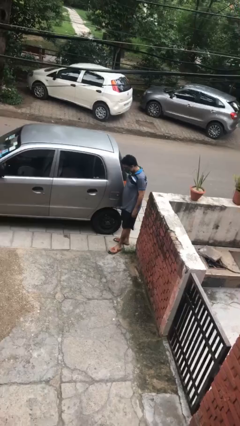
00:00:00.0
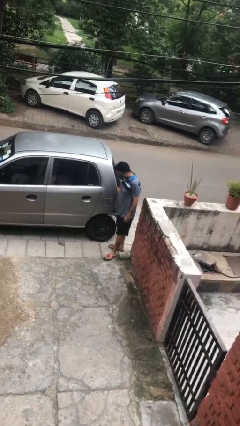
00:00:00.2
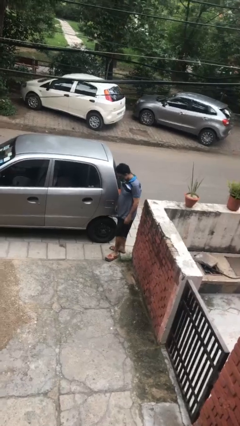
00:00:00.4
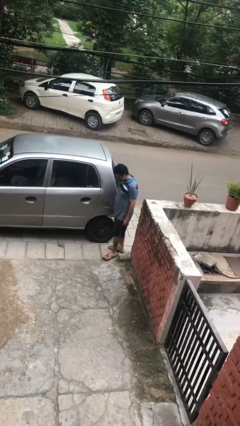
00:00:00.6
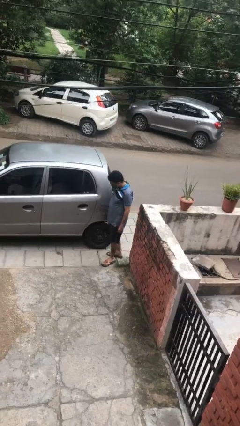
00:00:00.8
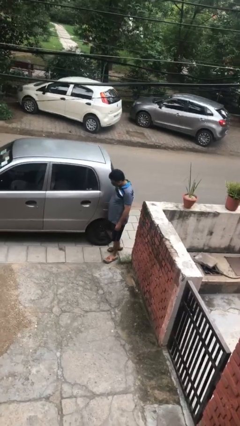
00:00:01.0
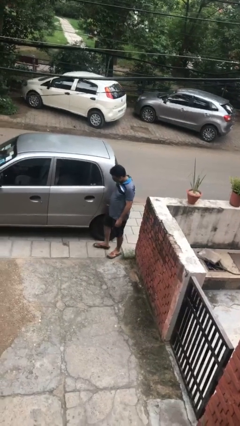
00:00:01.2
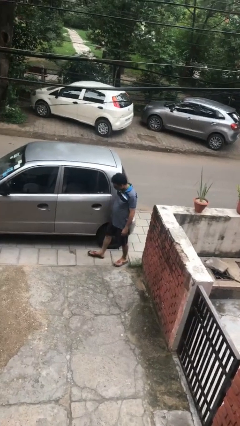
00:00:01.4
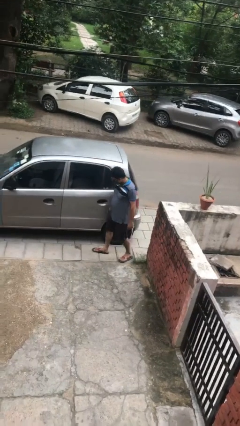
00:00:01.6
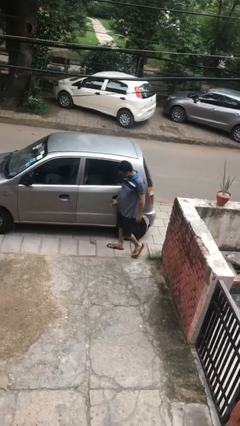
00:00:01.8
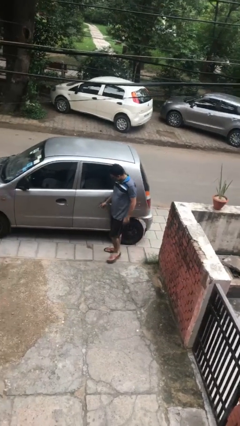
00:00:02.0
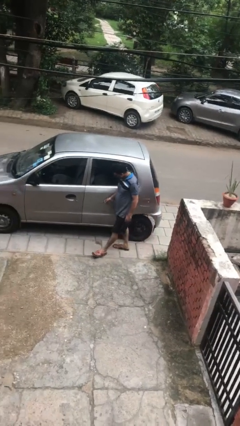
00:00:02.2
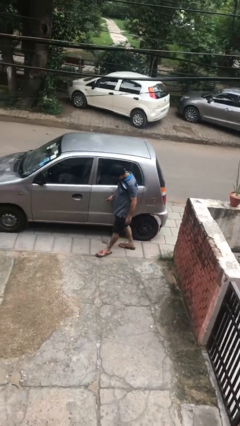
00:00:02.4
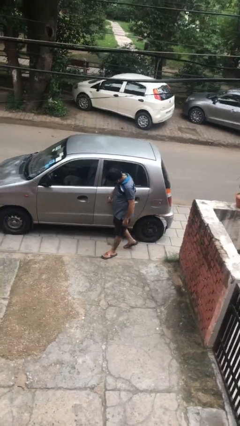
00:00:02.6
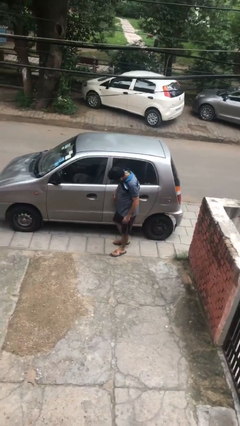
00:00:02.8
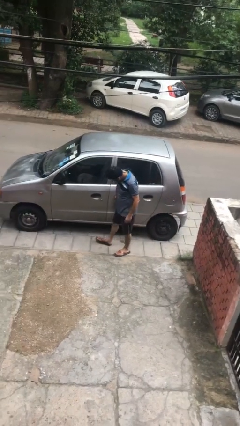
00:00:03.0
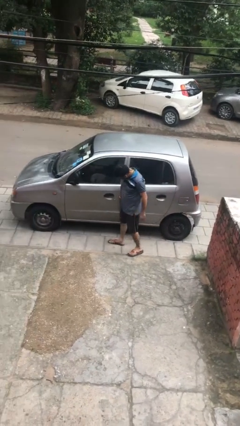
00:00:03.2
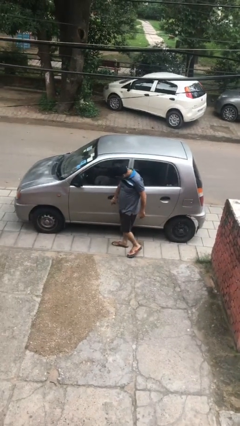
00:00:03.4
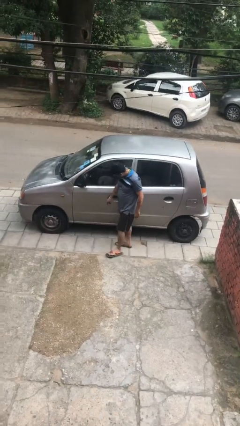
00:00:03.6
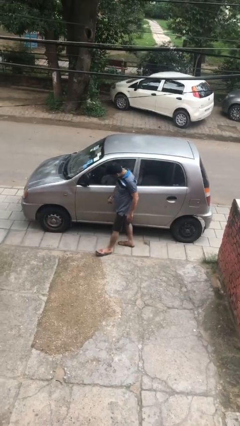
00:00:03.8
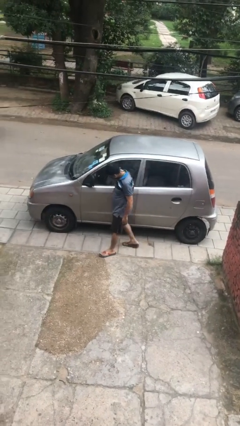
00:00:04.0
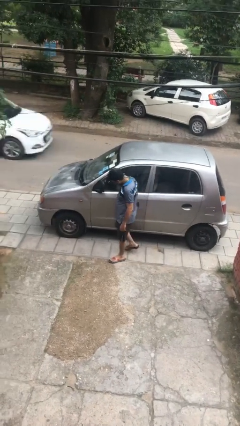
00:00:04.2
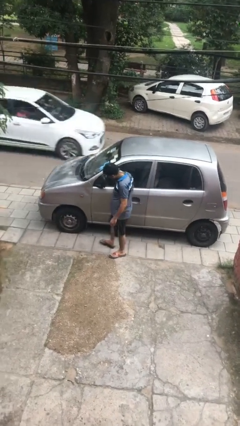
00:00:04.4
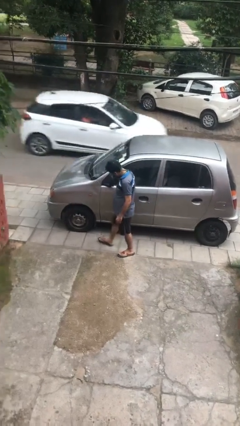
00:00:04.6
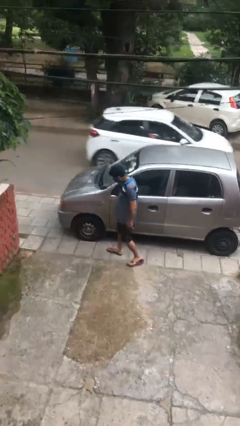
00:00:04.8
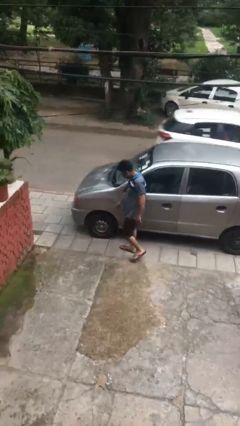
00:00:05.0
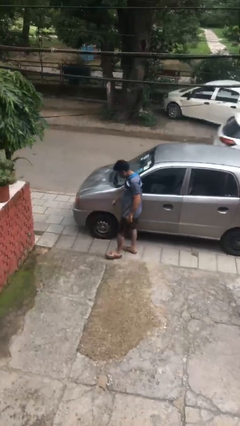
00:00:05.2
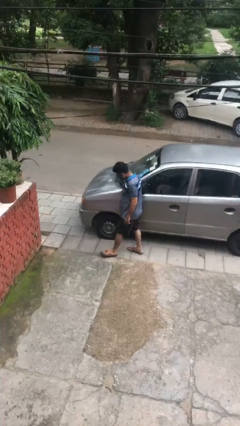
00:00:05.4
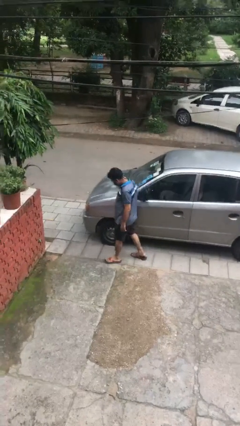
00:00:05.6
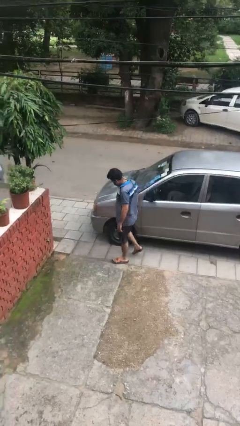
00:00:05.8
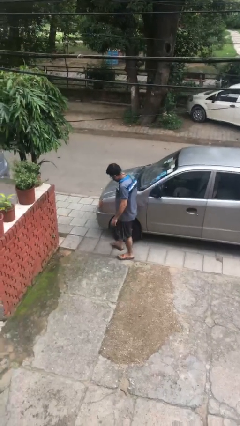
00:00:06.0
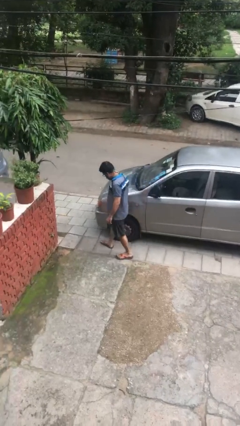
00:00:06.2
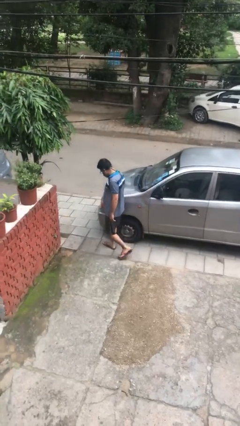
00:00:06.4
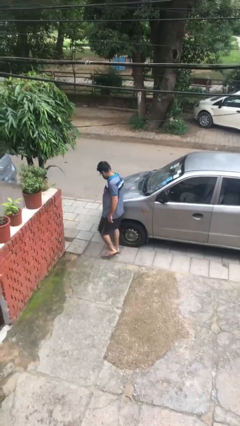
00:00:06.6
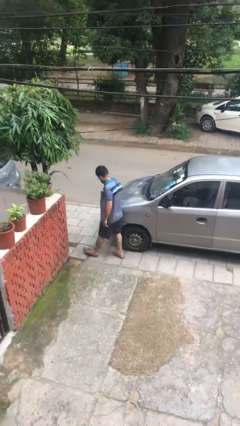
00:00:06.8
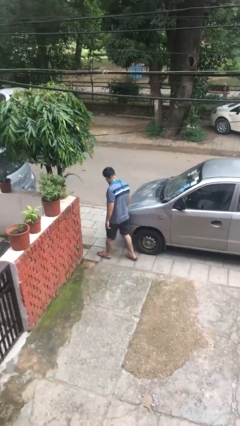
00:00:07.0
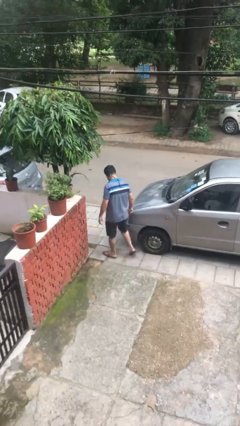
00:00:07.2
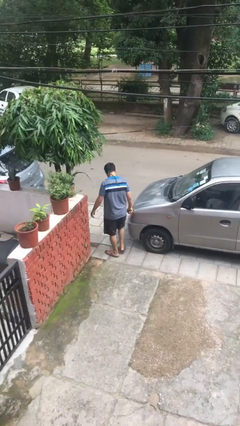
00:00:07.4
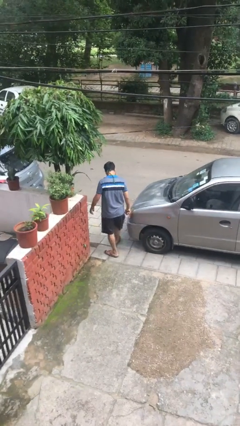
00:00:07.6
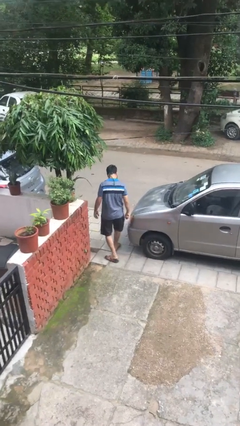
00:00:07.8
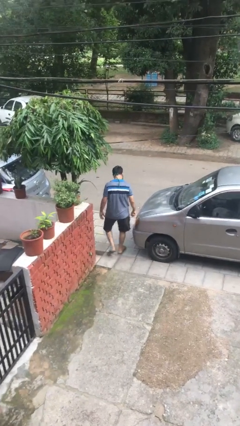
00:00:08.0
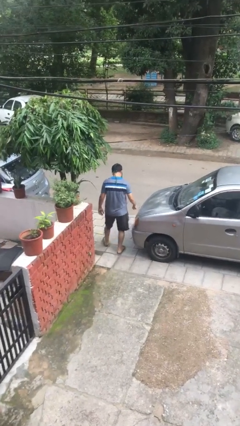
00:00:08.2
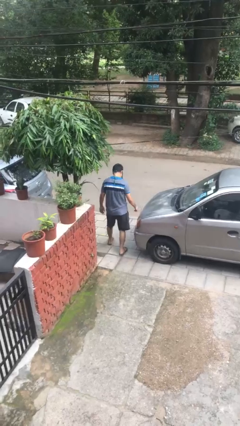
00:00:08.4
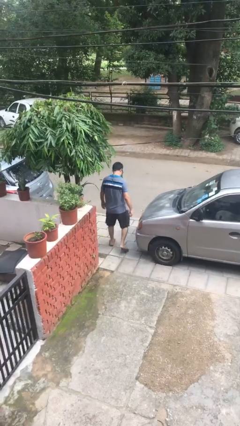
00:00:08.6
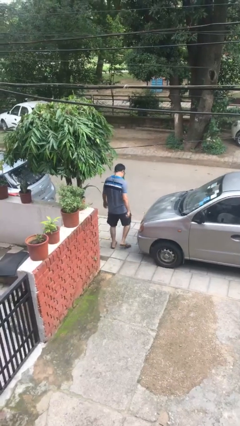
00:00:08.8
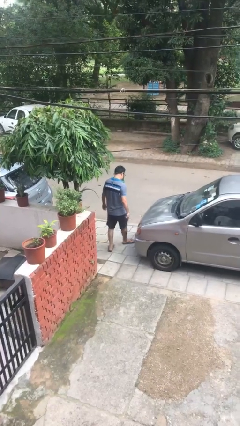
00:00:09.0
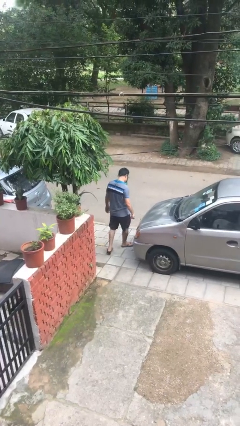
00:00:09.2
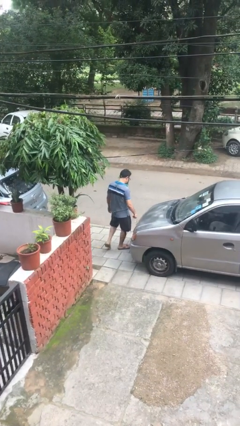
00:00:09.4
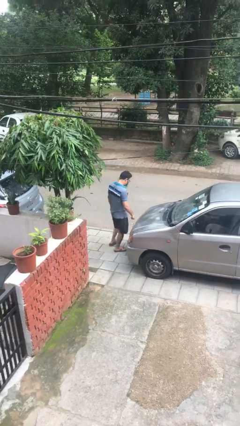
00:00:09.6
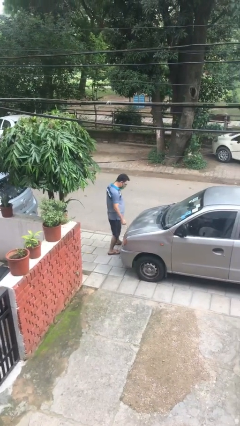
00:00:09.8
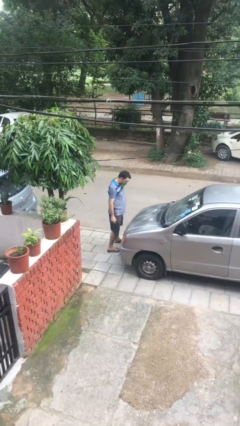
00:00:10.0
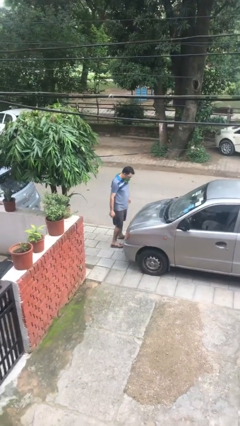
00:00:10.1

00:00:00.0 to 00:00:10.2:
person walks around car

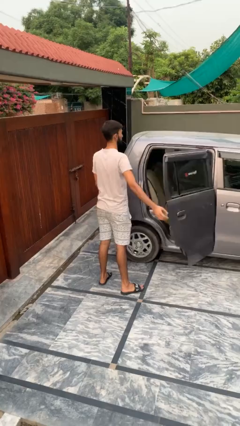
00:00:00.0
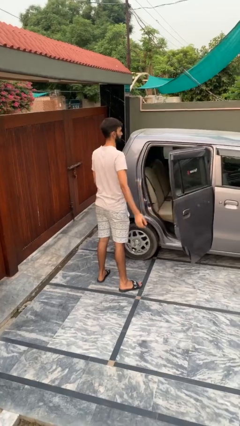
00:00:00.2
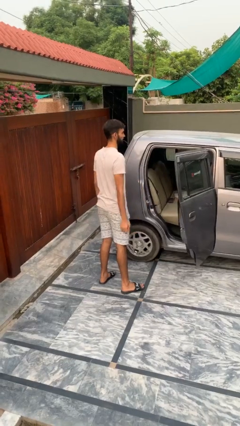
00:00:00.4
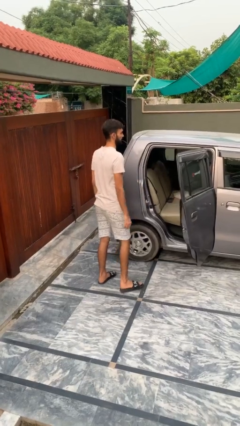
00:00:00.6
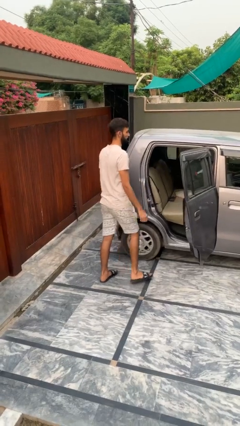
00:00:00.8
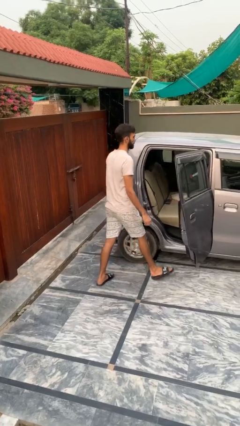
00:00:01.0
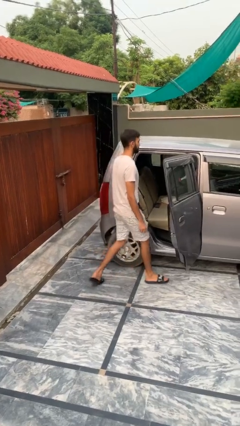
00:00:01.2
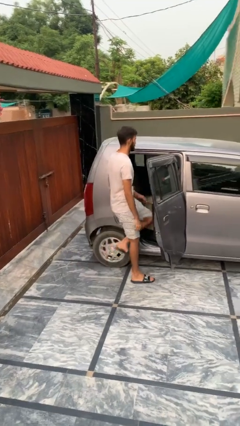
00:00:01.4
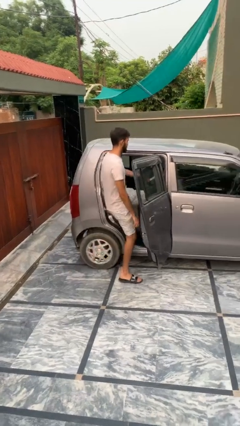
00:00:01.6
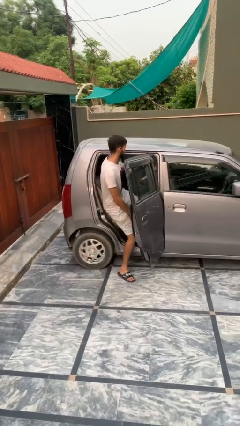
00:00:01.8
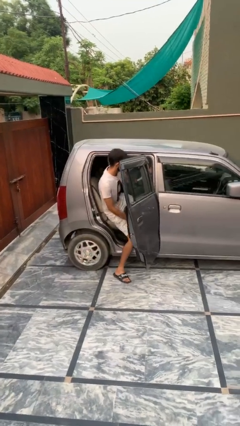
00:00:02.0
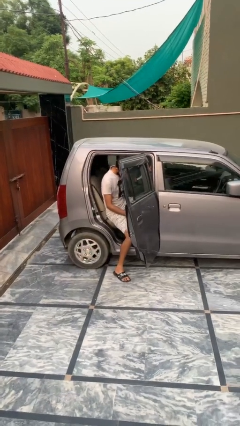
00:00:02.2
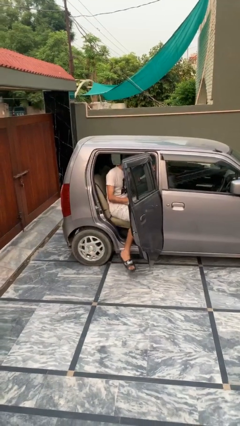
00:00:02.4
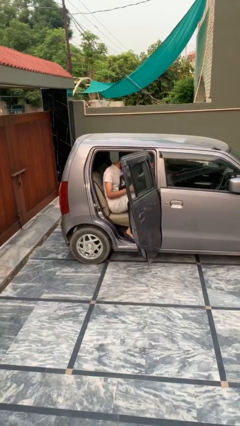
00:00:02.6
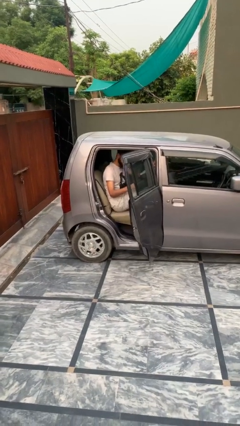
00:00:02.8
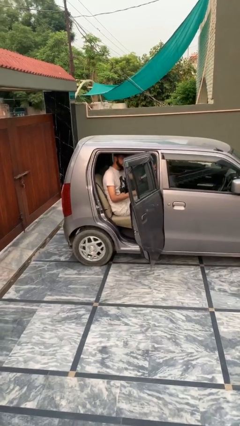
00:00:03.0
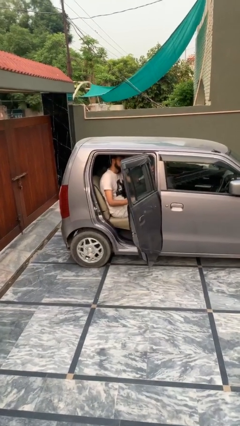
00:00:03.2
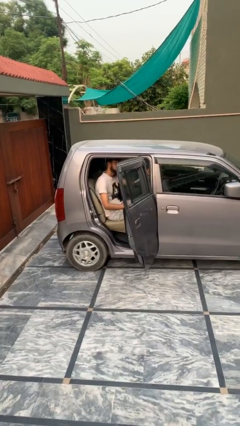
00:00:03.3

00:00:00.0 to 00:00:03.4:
person enters car

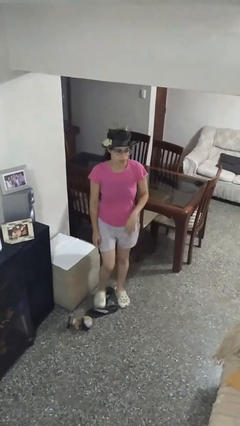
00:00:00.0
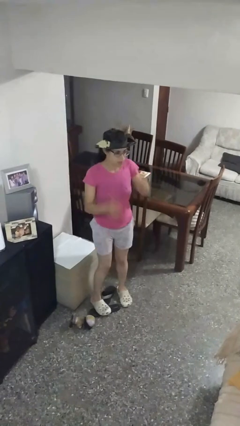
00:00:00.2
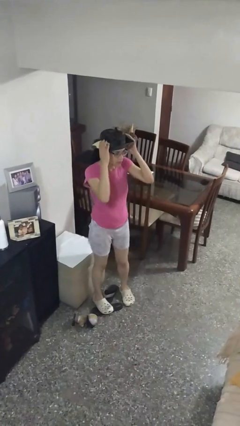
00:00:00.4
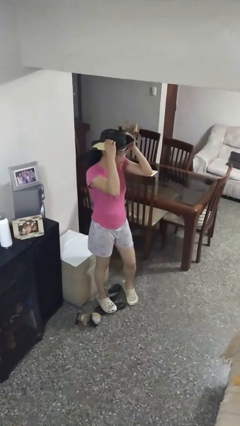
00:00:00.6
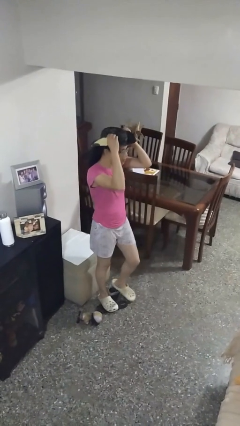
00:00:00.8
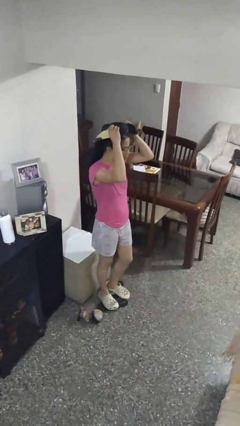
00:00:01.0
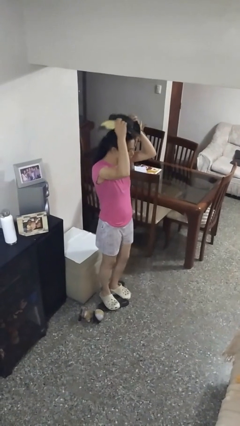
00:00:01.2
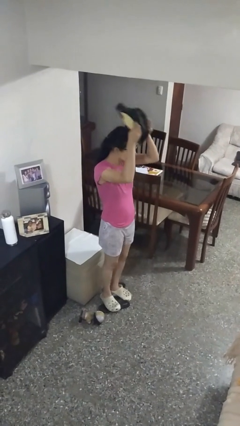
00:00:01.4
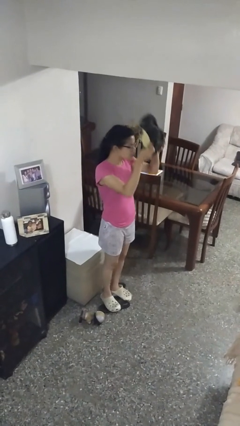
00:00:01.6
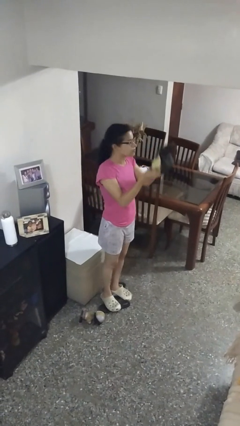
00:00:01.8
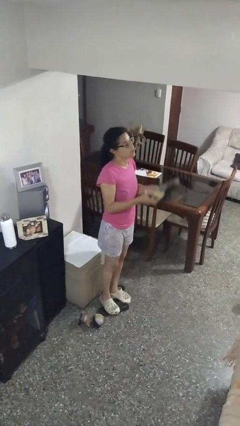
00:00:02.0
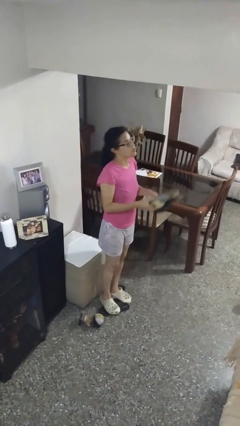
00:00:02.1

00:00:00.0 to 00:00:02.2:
person takes off hat

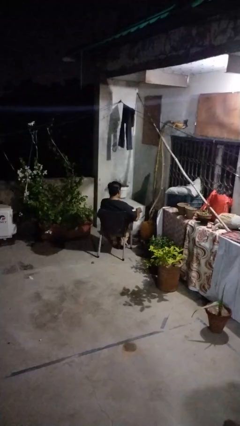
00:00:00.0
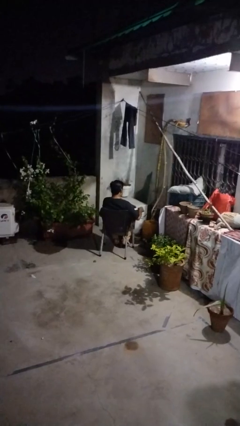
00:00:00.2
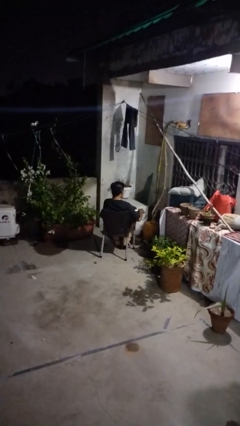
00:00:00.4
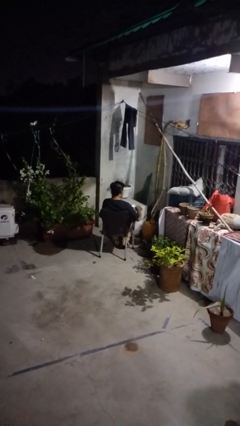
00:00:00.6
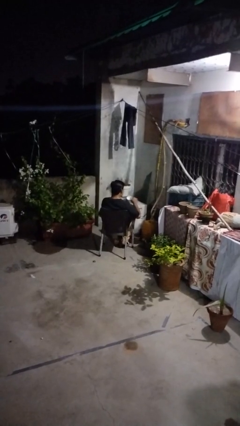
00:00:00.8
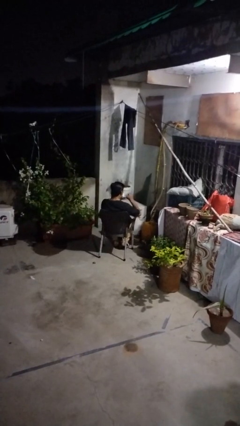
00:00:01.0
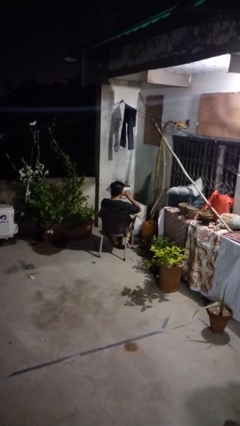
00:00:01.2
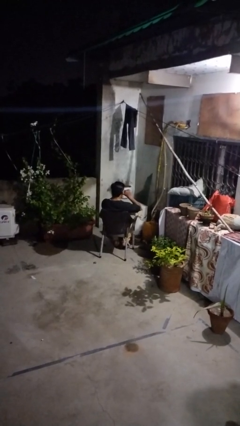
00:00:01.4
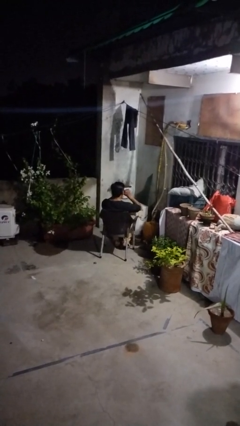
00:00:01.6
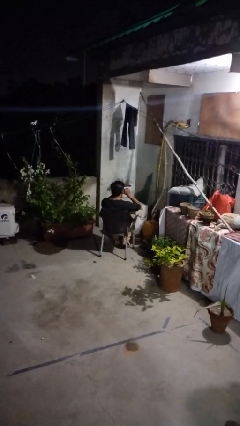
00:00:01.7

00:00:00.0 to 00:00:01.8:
person drinks from mug

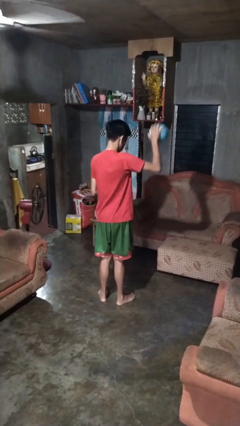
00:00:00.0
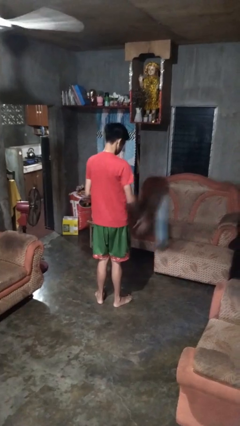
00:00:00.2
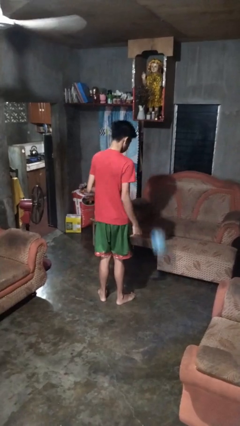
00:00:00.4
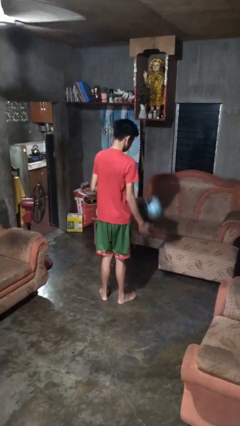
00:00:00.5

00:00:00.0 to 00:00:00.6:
person bounces ball on floor
